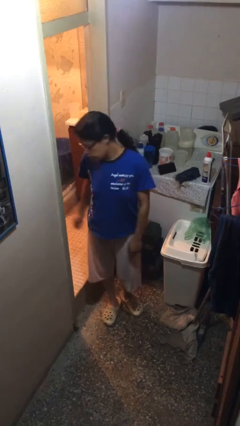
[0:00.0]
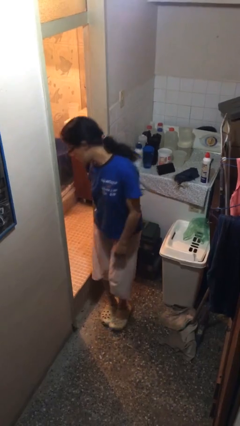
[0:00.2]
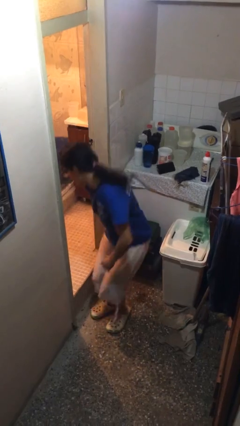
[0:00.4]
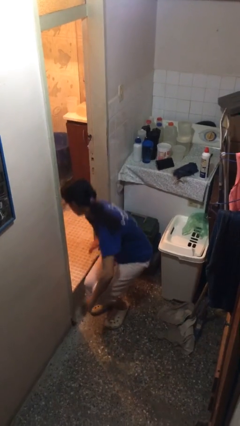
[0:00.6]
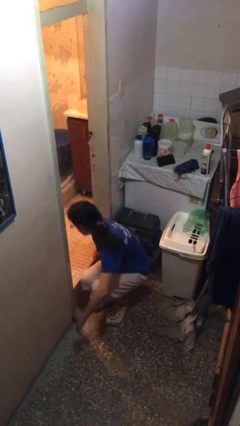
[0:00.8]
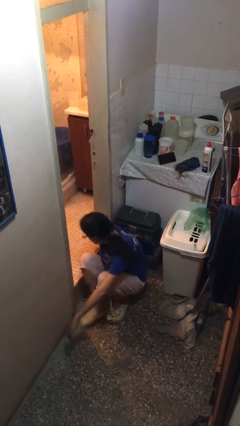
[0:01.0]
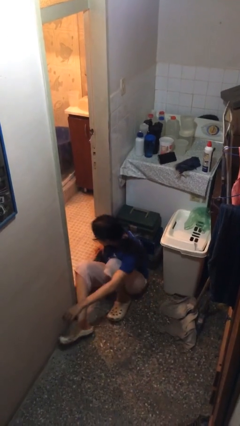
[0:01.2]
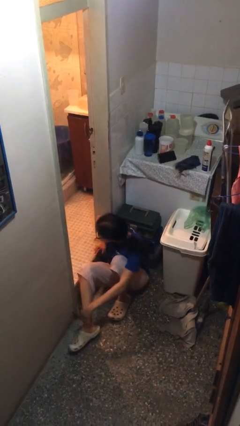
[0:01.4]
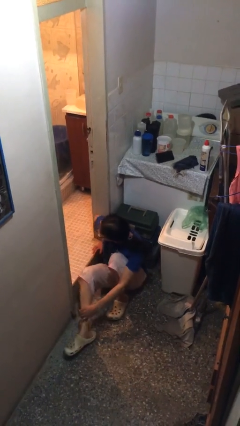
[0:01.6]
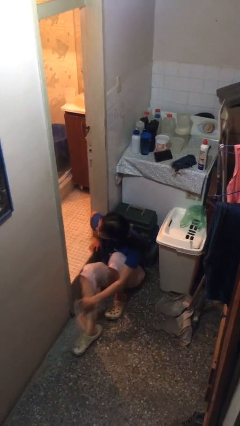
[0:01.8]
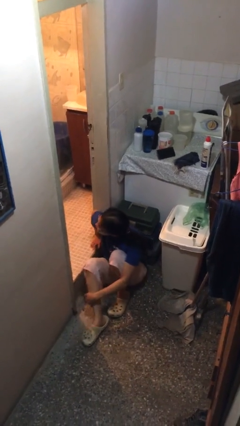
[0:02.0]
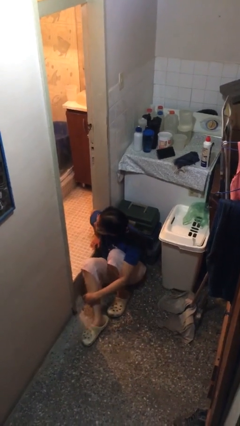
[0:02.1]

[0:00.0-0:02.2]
person sits down

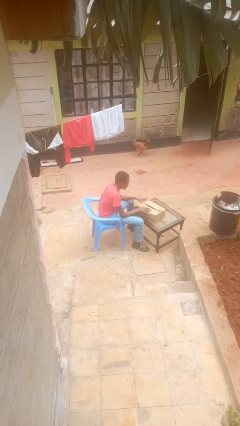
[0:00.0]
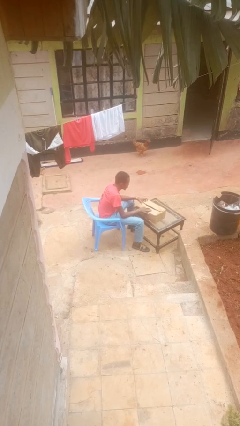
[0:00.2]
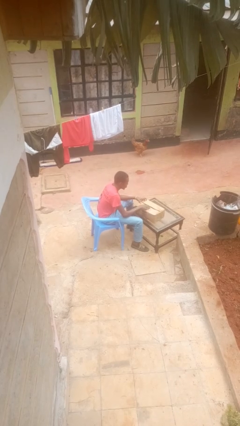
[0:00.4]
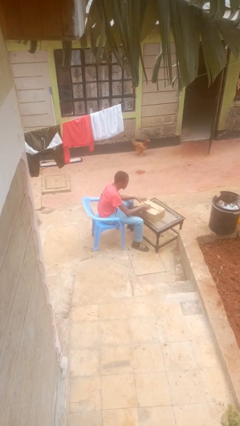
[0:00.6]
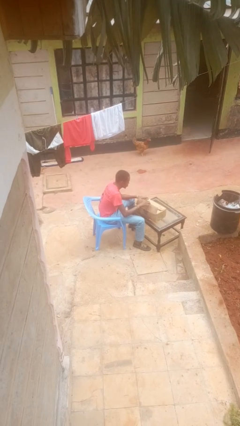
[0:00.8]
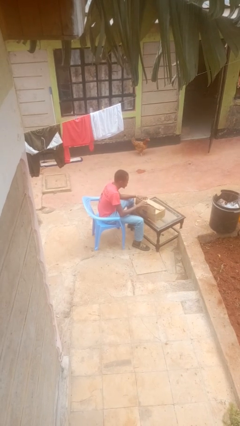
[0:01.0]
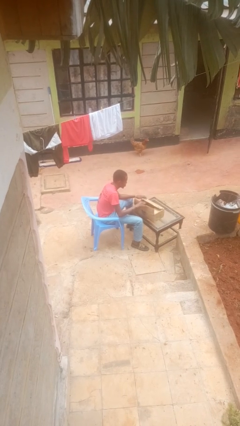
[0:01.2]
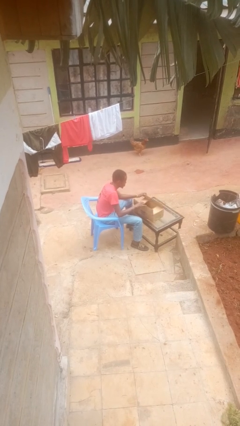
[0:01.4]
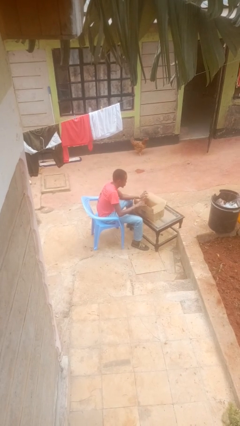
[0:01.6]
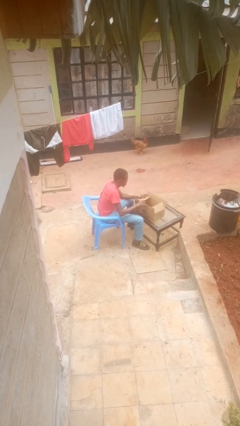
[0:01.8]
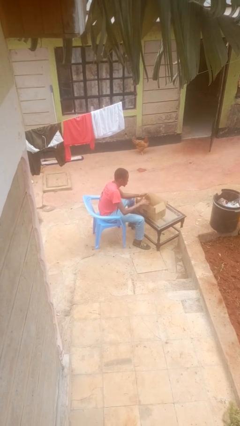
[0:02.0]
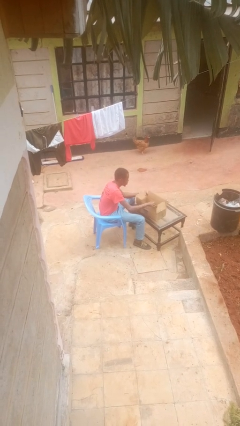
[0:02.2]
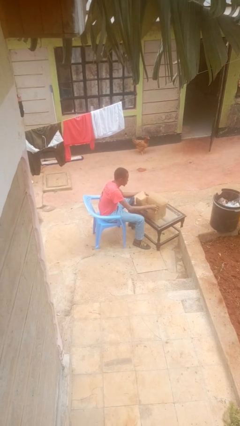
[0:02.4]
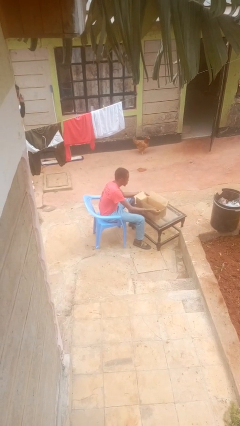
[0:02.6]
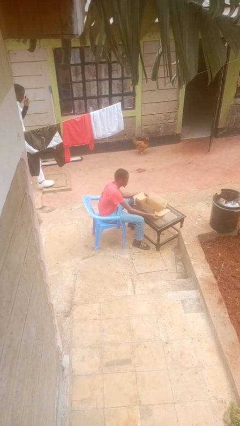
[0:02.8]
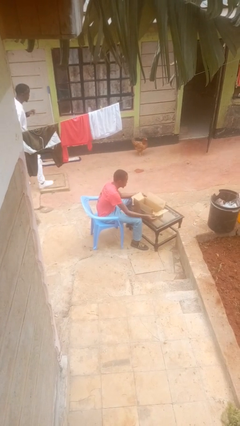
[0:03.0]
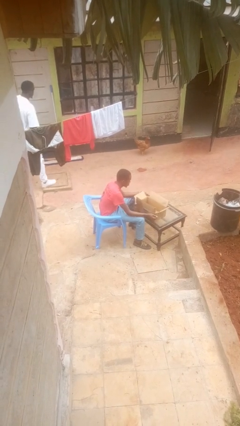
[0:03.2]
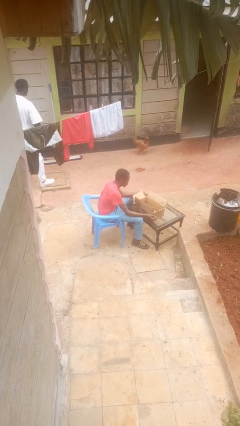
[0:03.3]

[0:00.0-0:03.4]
person opens box

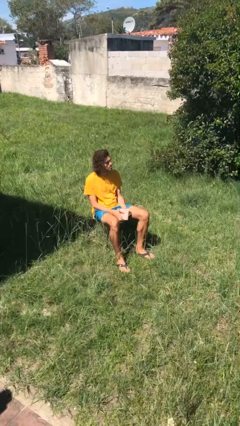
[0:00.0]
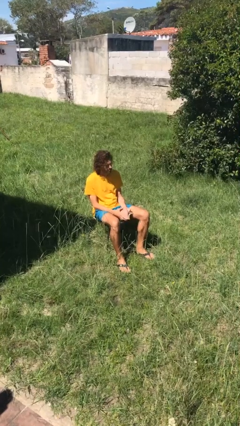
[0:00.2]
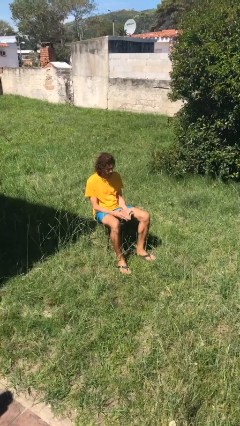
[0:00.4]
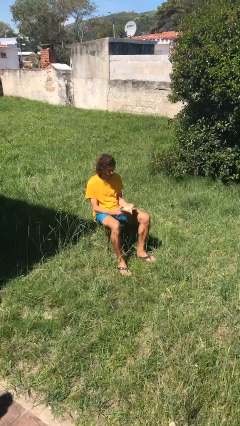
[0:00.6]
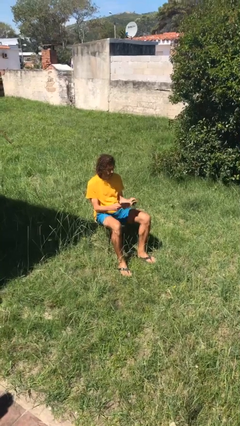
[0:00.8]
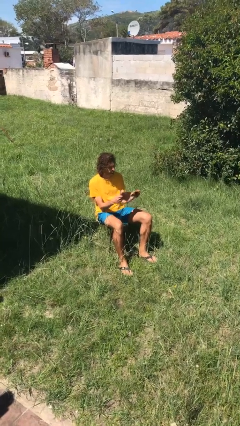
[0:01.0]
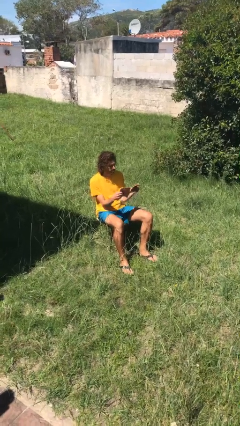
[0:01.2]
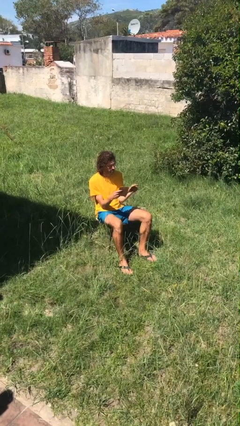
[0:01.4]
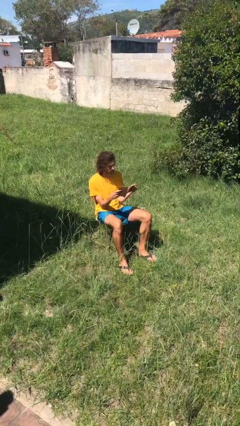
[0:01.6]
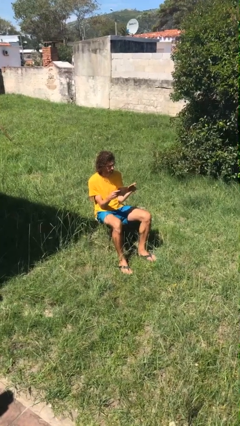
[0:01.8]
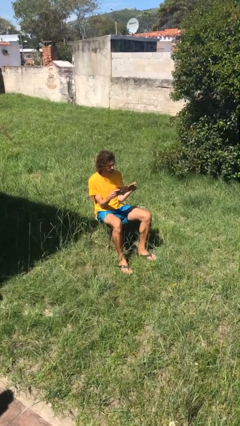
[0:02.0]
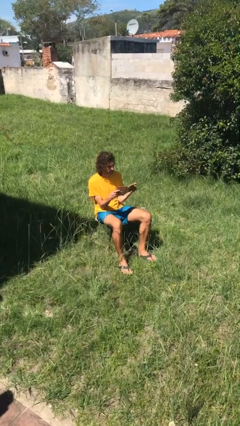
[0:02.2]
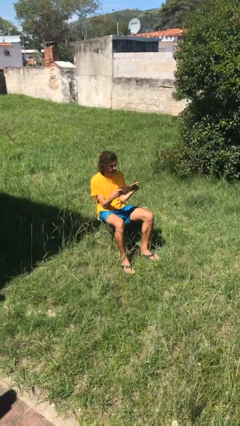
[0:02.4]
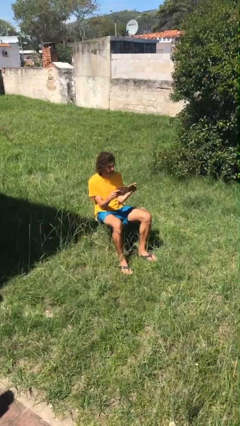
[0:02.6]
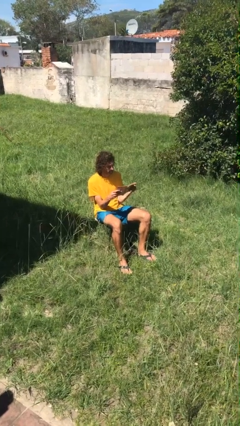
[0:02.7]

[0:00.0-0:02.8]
person reads document

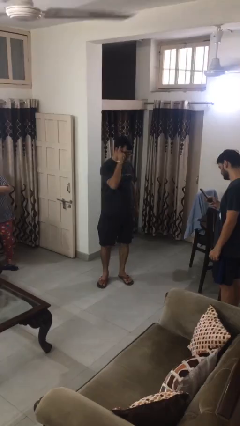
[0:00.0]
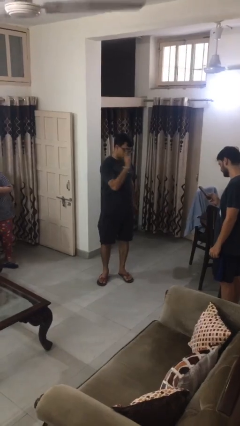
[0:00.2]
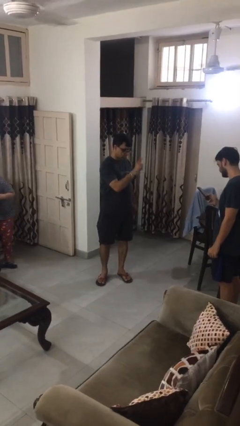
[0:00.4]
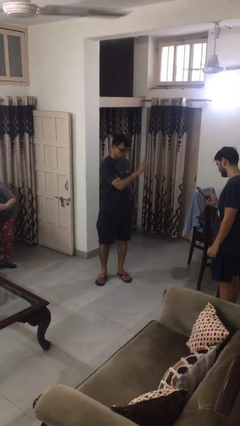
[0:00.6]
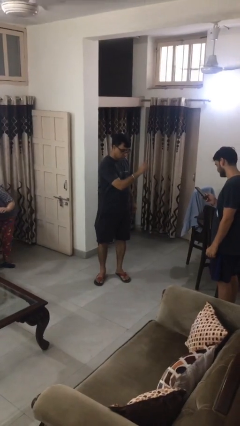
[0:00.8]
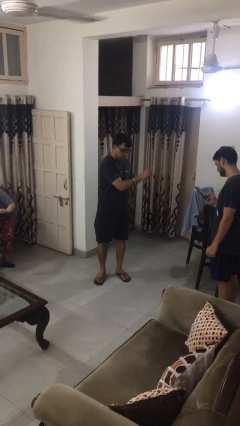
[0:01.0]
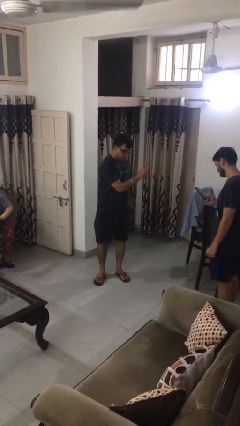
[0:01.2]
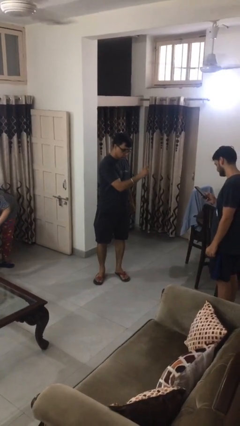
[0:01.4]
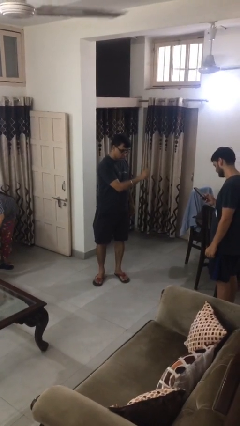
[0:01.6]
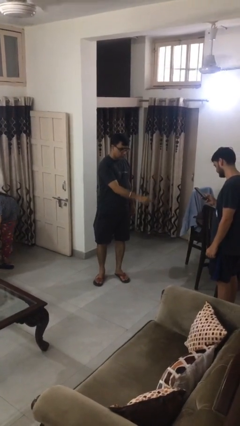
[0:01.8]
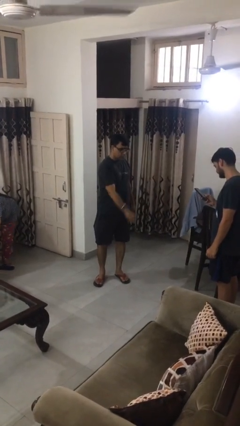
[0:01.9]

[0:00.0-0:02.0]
person points at person

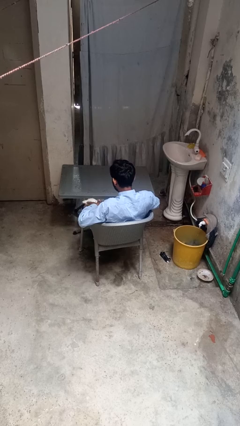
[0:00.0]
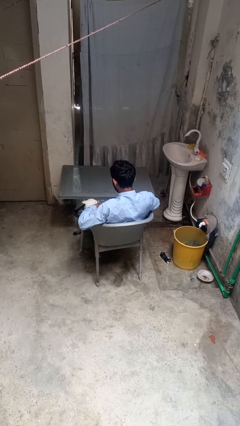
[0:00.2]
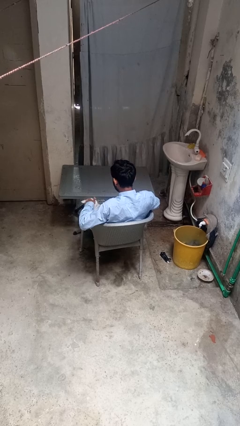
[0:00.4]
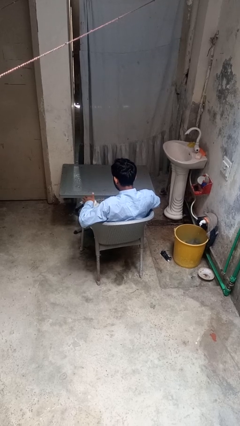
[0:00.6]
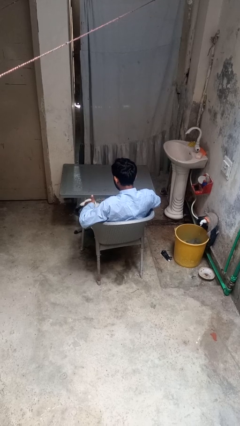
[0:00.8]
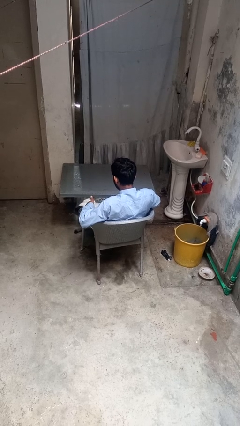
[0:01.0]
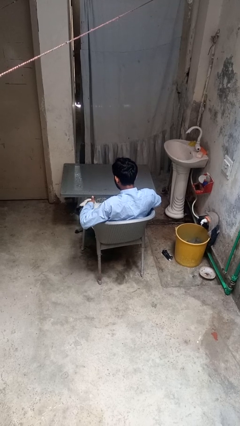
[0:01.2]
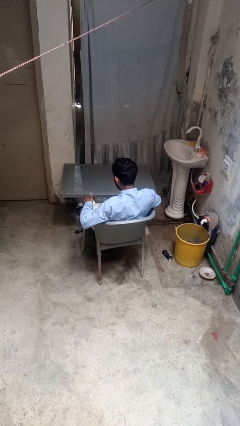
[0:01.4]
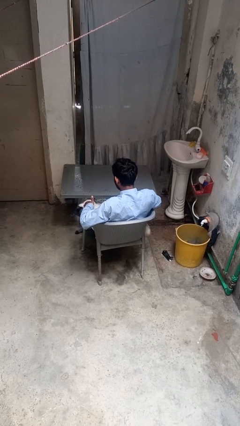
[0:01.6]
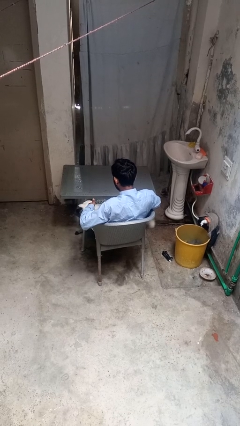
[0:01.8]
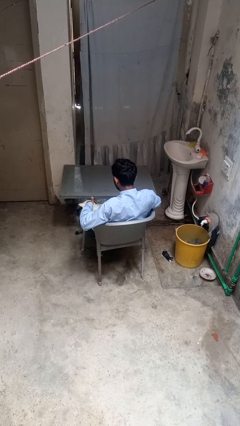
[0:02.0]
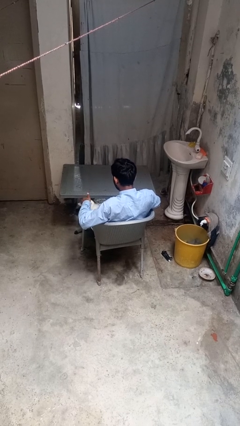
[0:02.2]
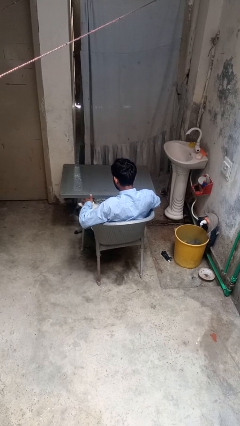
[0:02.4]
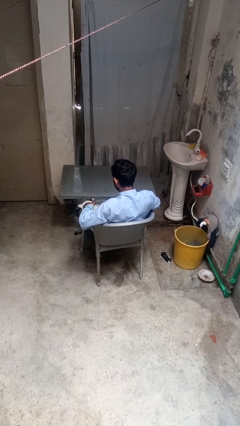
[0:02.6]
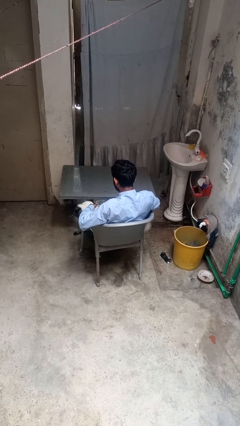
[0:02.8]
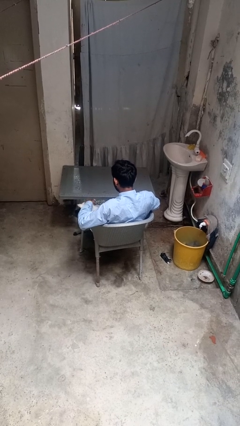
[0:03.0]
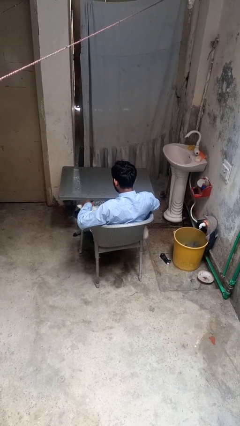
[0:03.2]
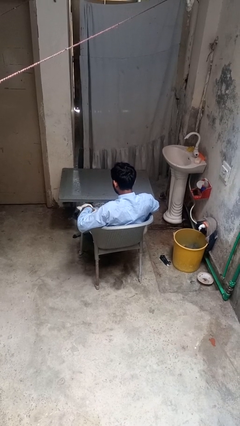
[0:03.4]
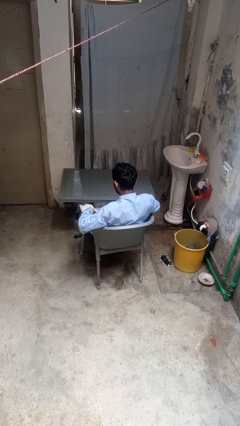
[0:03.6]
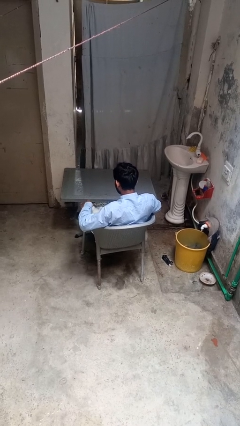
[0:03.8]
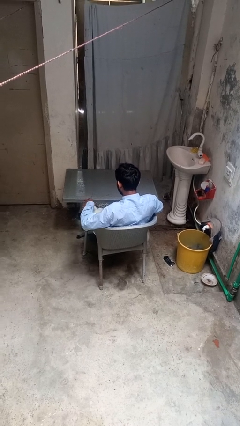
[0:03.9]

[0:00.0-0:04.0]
person pets cat

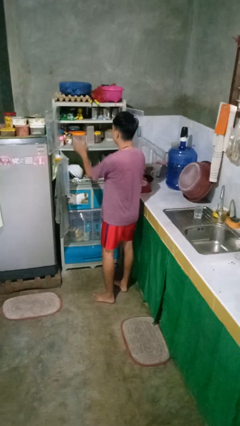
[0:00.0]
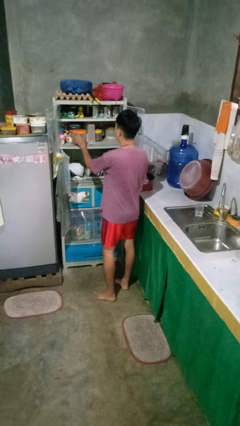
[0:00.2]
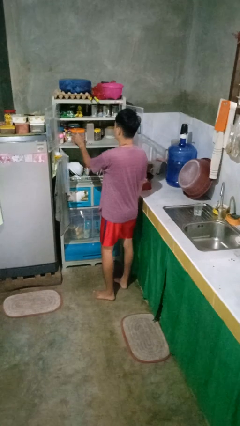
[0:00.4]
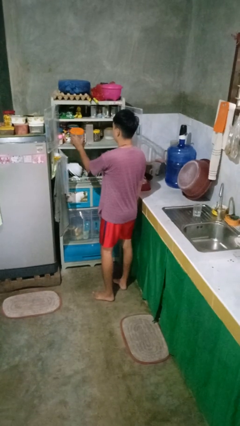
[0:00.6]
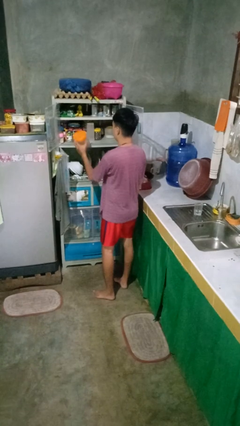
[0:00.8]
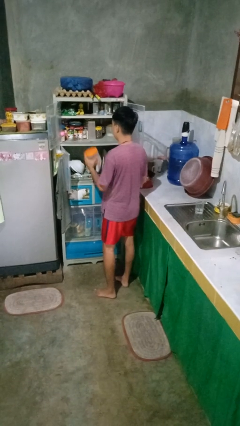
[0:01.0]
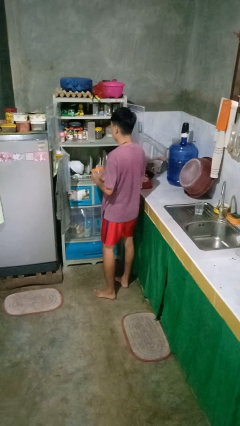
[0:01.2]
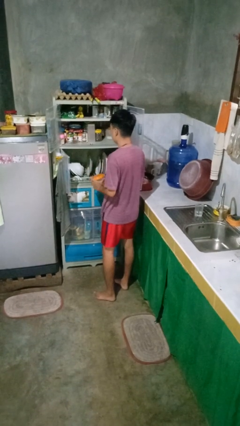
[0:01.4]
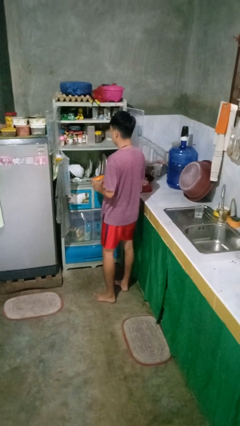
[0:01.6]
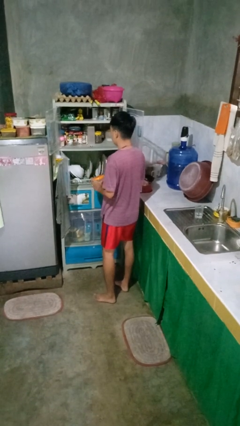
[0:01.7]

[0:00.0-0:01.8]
person takes object from cabinet

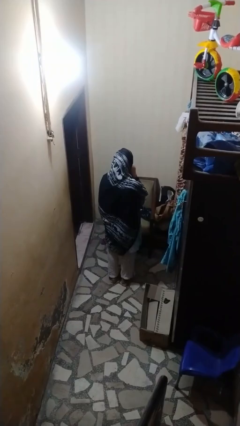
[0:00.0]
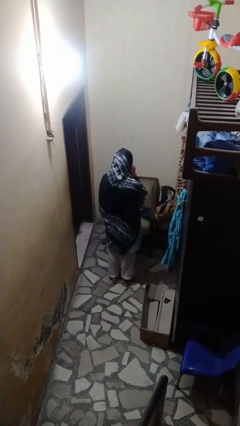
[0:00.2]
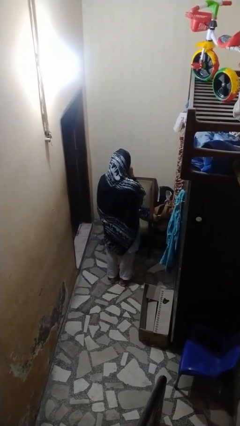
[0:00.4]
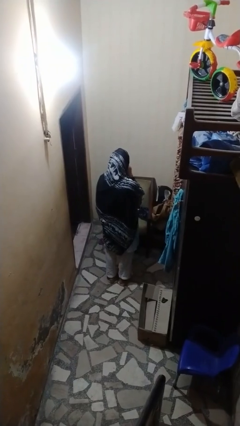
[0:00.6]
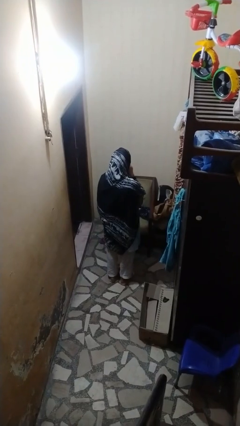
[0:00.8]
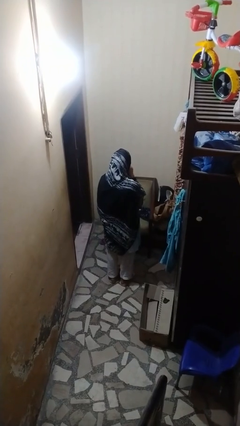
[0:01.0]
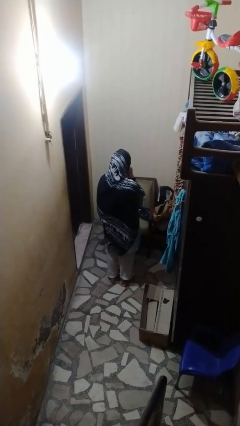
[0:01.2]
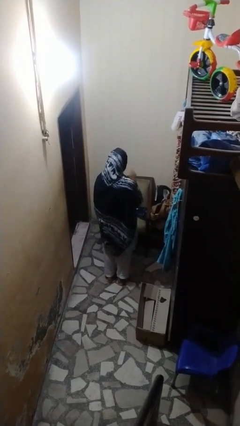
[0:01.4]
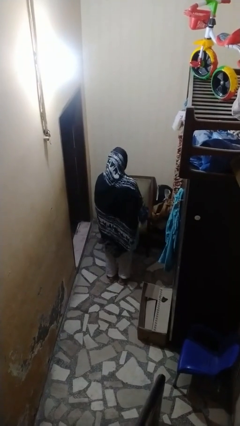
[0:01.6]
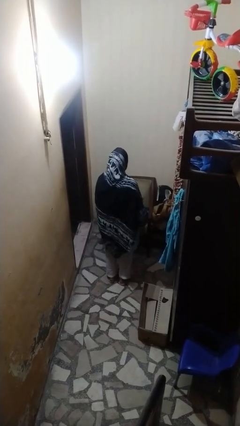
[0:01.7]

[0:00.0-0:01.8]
person gestures be quiet
